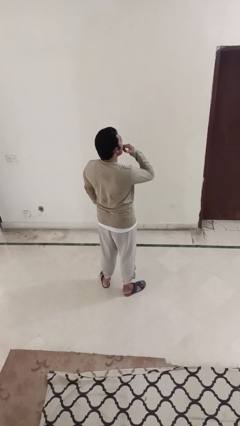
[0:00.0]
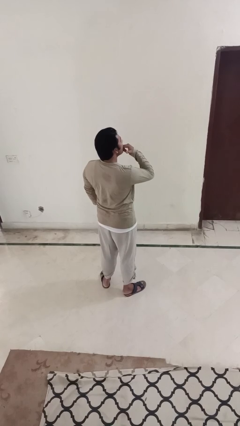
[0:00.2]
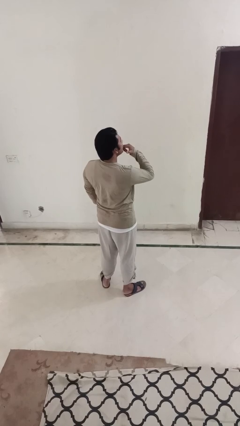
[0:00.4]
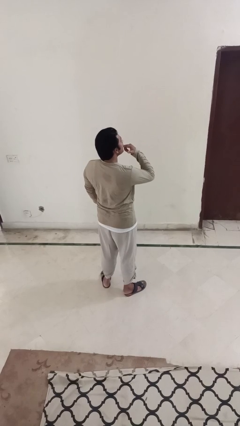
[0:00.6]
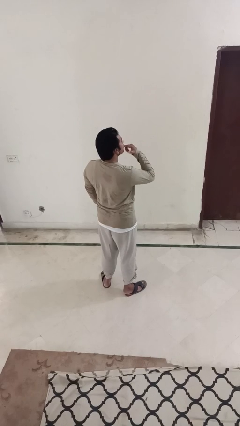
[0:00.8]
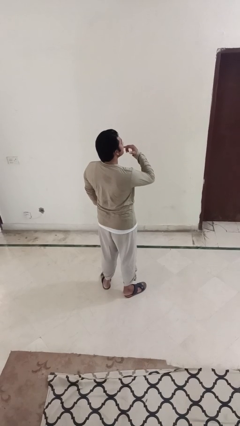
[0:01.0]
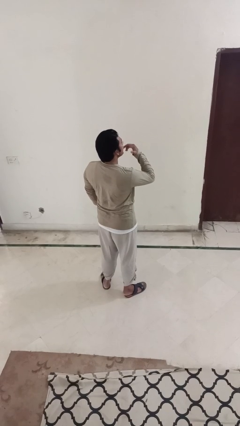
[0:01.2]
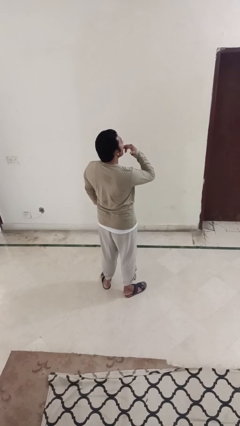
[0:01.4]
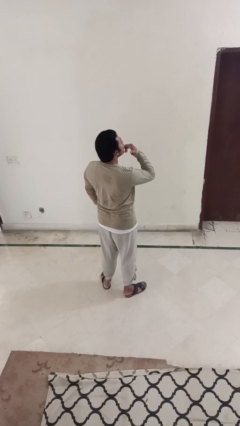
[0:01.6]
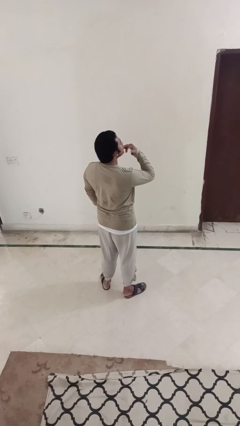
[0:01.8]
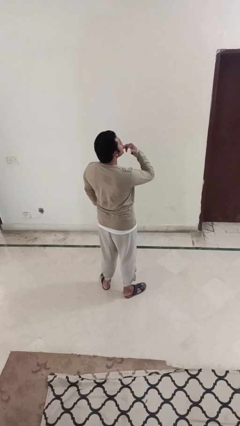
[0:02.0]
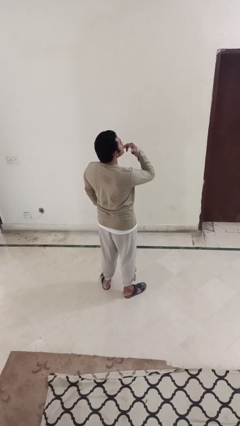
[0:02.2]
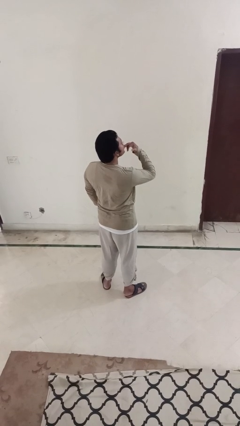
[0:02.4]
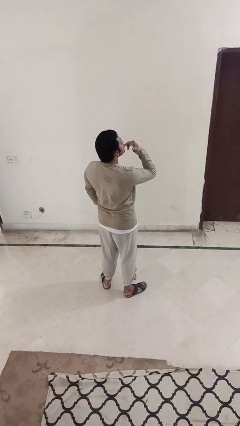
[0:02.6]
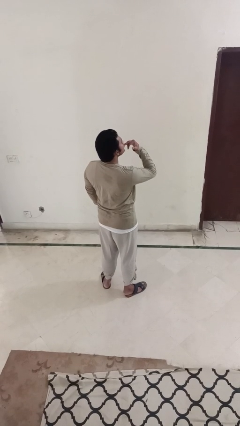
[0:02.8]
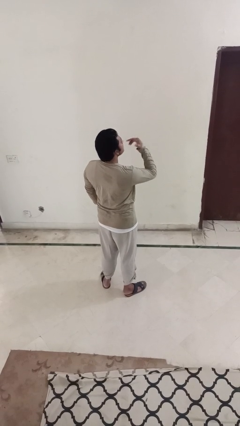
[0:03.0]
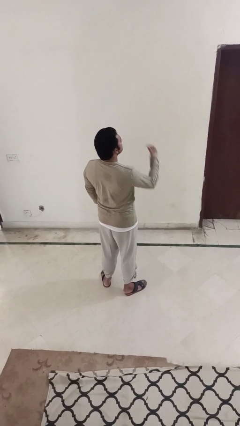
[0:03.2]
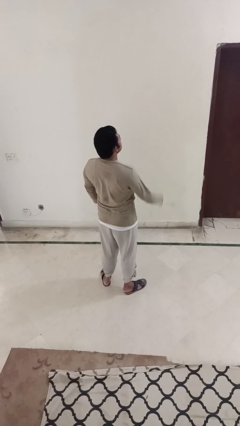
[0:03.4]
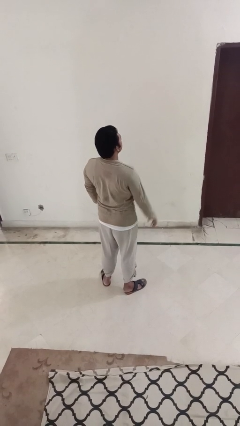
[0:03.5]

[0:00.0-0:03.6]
person licks fingers

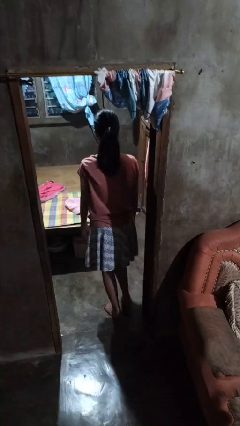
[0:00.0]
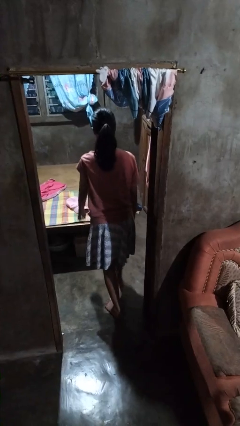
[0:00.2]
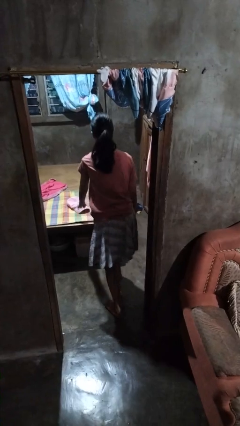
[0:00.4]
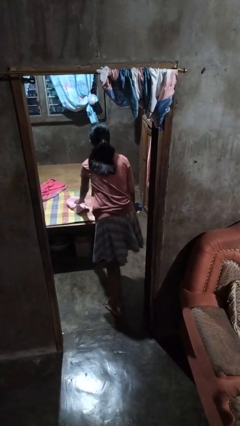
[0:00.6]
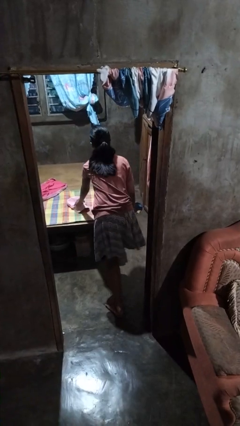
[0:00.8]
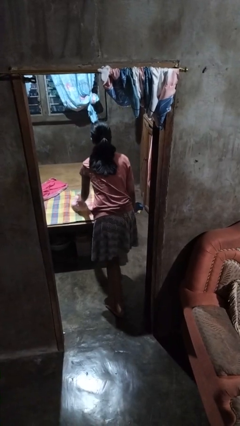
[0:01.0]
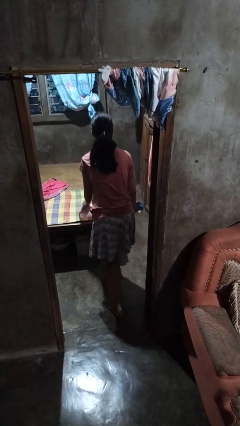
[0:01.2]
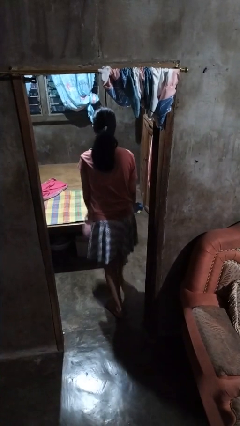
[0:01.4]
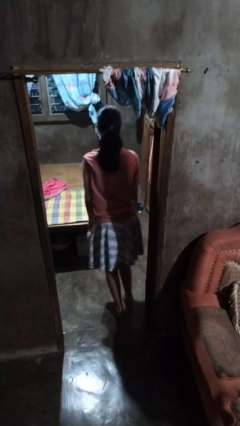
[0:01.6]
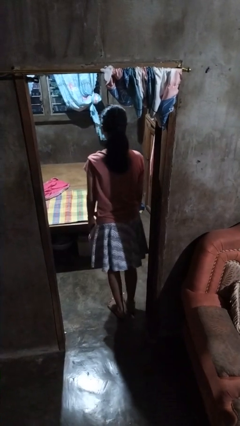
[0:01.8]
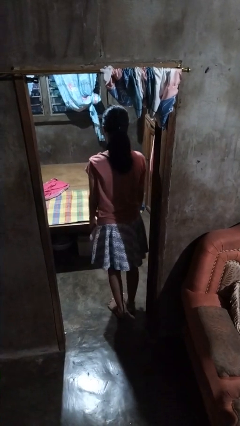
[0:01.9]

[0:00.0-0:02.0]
person picks up object from bed

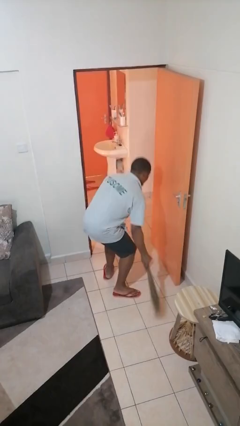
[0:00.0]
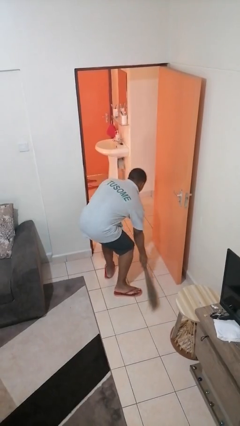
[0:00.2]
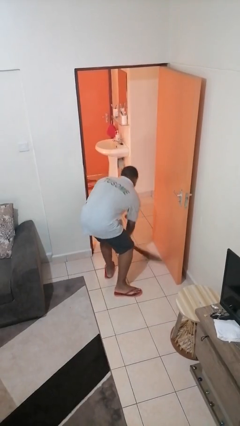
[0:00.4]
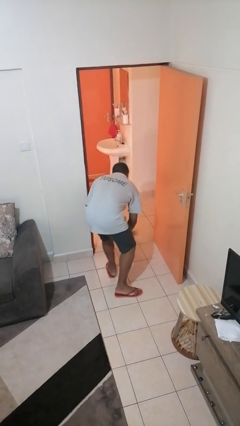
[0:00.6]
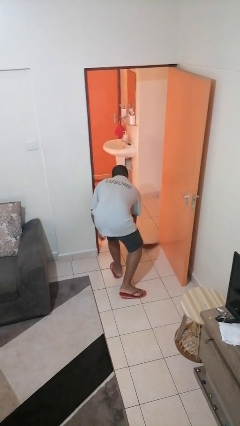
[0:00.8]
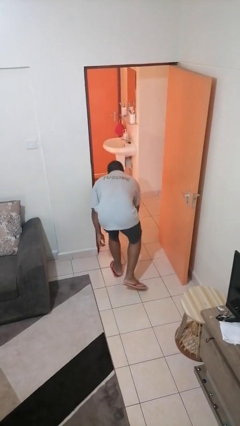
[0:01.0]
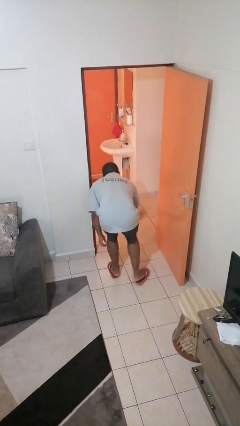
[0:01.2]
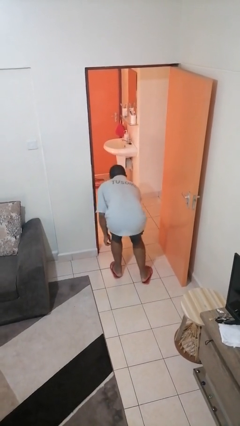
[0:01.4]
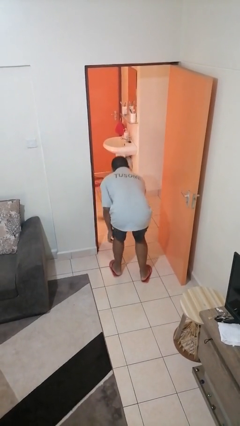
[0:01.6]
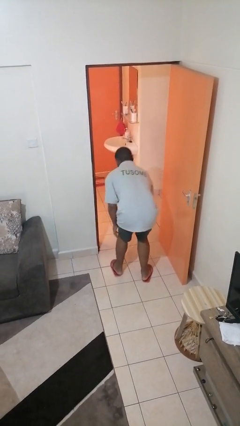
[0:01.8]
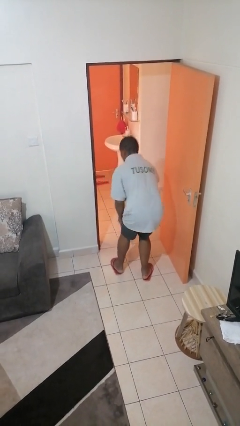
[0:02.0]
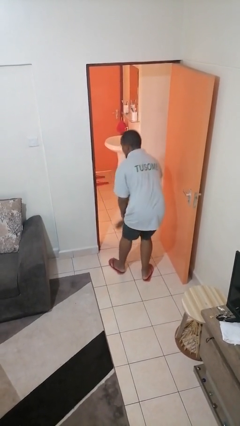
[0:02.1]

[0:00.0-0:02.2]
person sweeps floor

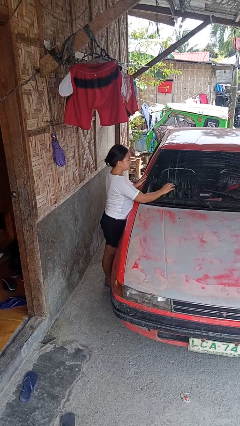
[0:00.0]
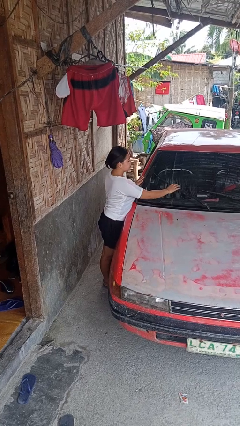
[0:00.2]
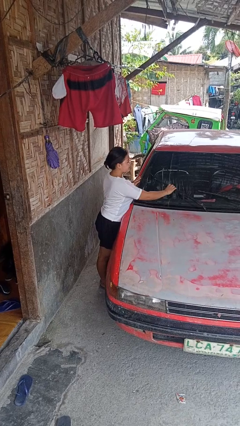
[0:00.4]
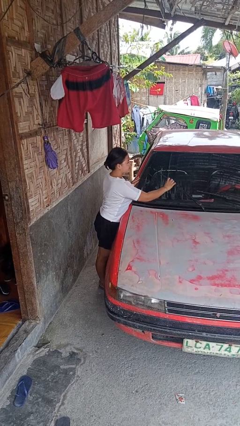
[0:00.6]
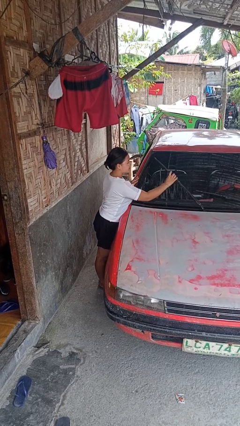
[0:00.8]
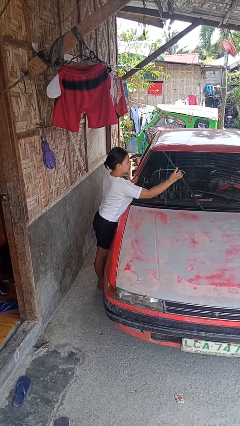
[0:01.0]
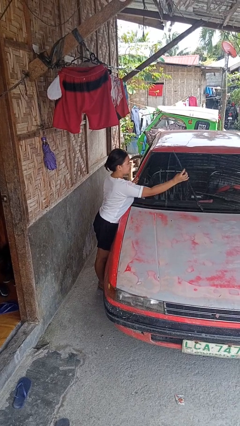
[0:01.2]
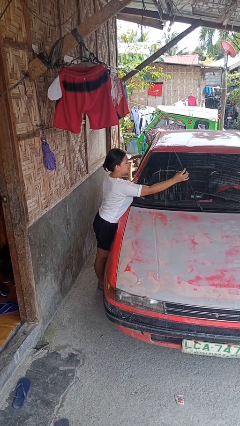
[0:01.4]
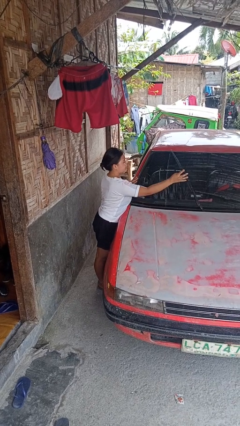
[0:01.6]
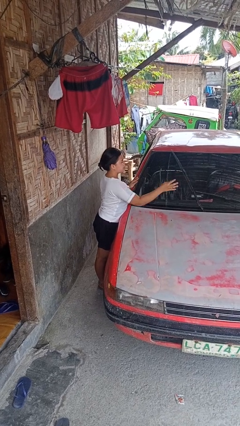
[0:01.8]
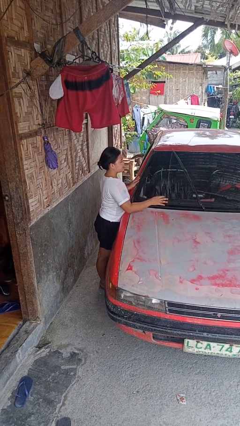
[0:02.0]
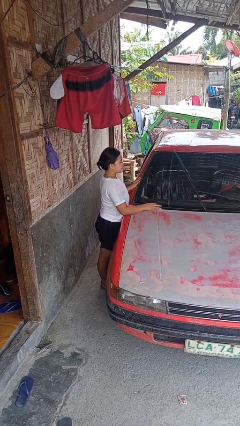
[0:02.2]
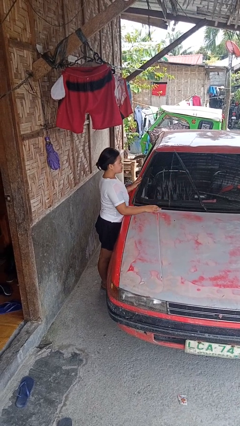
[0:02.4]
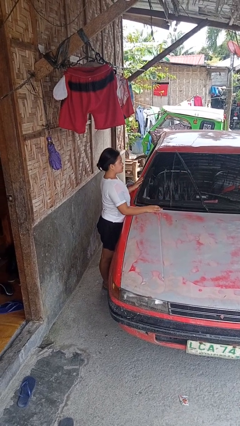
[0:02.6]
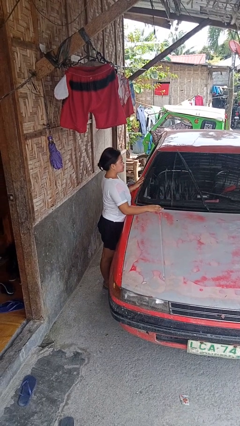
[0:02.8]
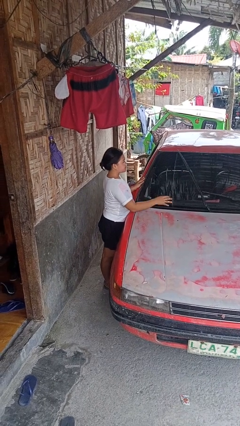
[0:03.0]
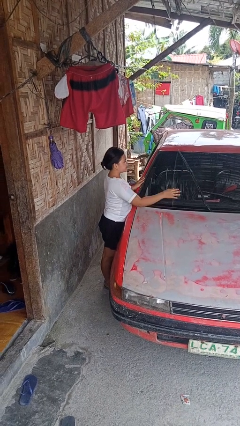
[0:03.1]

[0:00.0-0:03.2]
person flips up car wipers

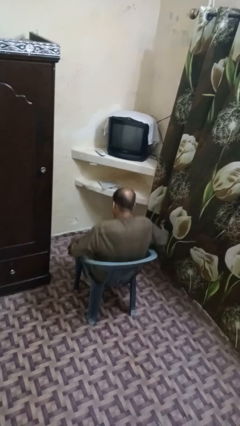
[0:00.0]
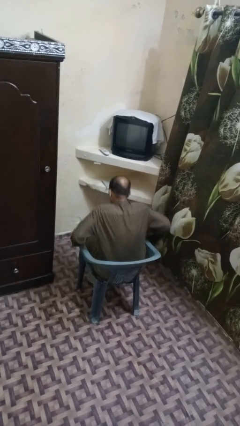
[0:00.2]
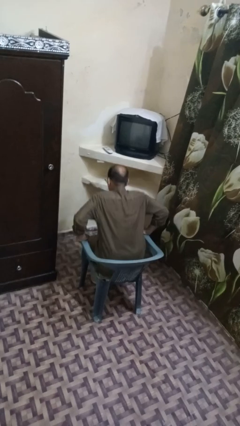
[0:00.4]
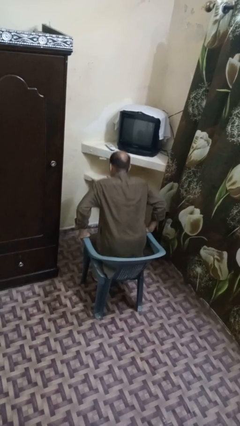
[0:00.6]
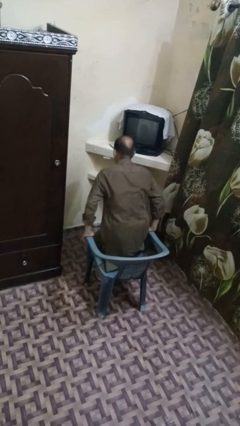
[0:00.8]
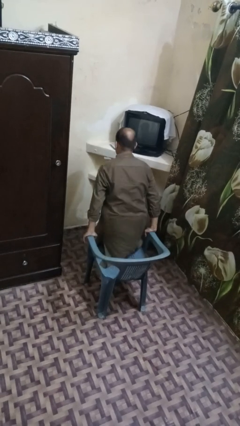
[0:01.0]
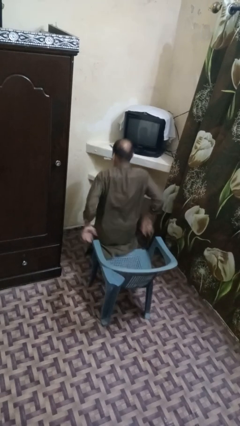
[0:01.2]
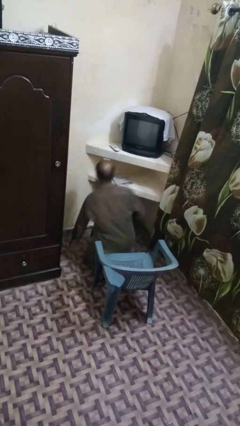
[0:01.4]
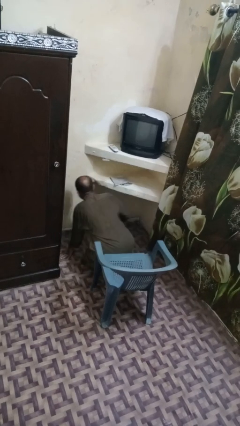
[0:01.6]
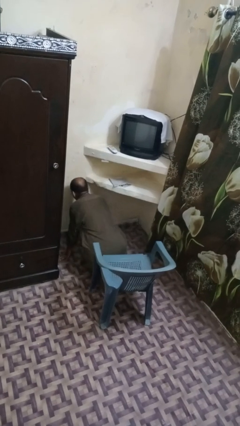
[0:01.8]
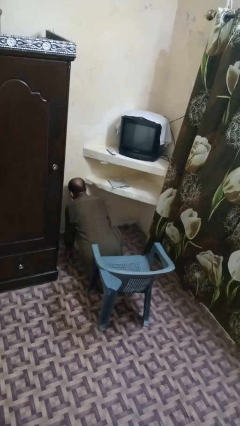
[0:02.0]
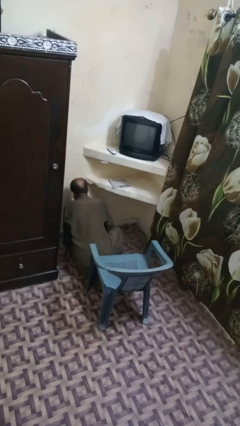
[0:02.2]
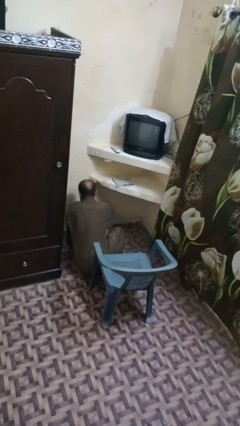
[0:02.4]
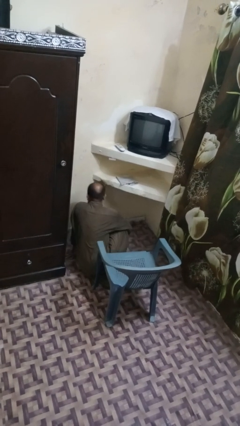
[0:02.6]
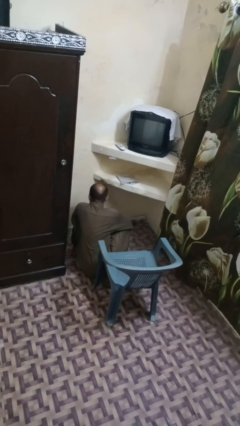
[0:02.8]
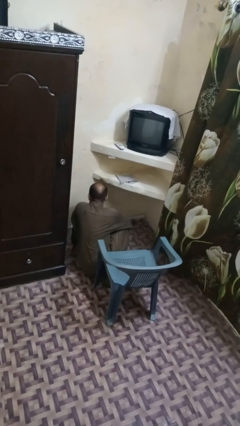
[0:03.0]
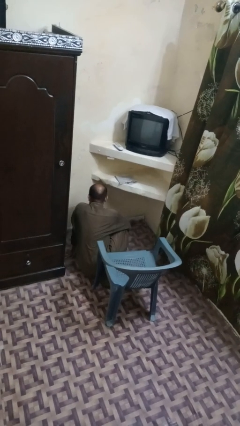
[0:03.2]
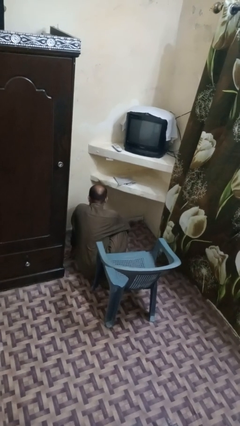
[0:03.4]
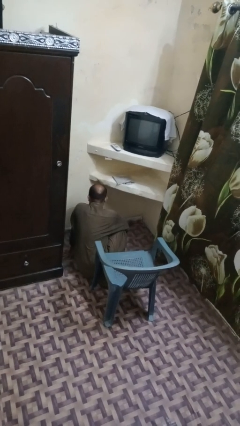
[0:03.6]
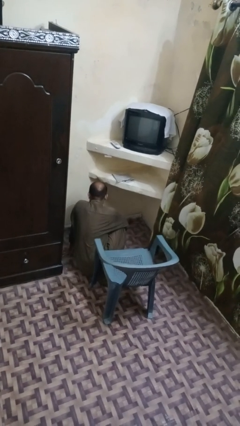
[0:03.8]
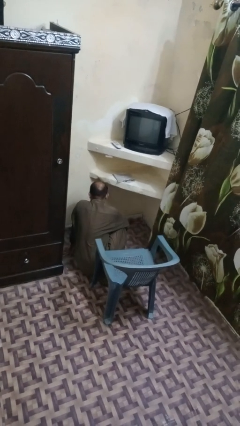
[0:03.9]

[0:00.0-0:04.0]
person falls from chair

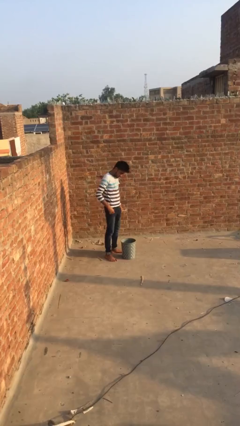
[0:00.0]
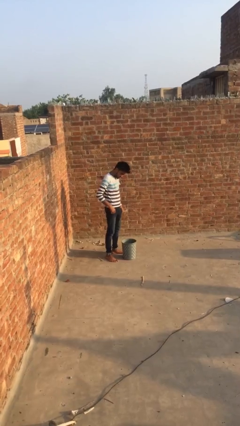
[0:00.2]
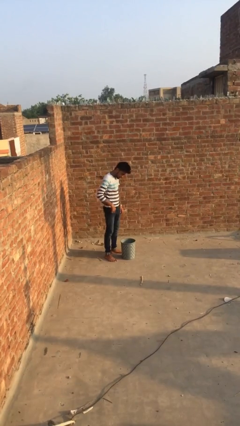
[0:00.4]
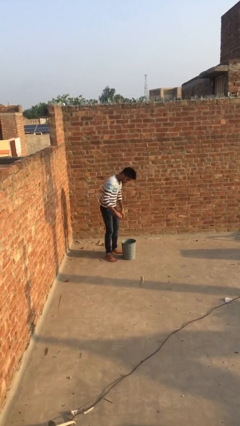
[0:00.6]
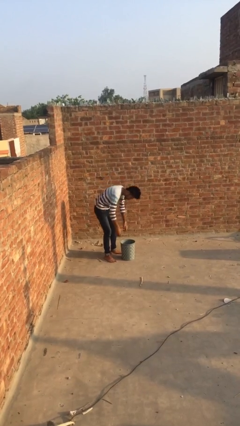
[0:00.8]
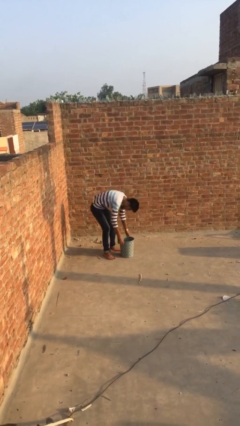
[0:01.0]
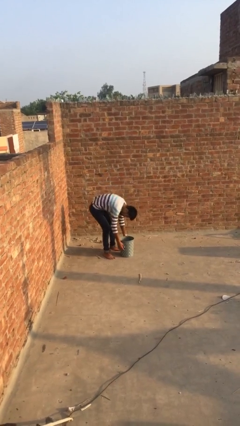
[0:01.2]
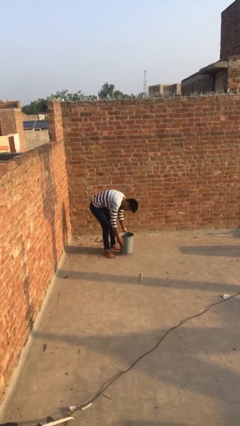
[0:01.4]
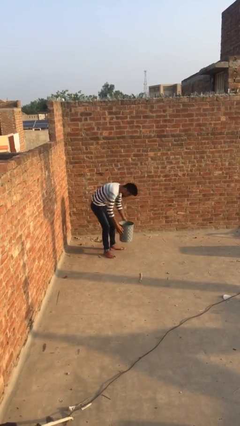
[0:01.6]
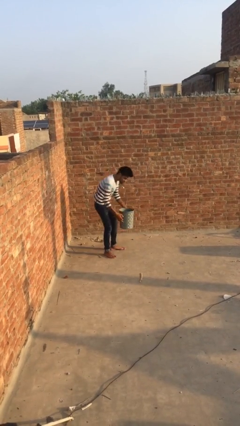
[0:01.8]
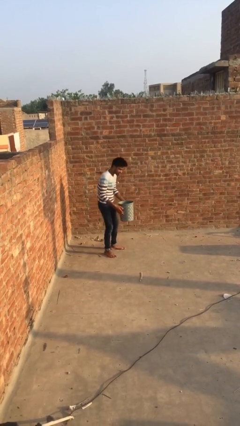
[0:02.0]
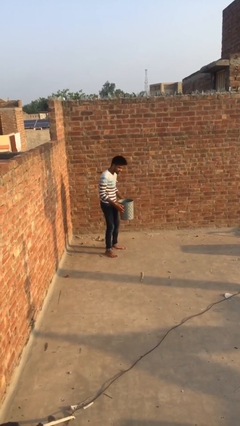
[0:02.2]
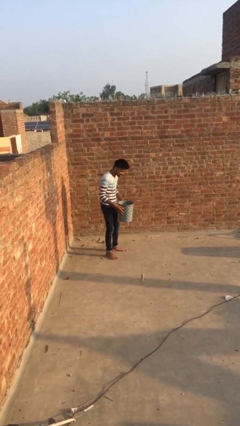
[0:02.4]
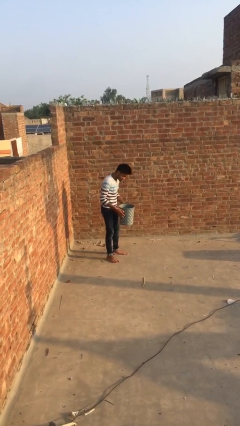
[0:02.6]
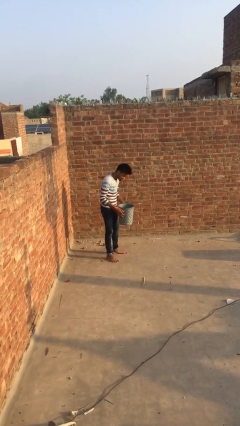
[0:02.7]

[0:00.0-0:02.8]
person picks up object from floor
